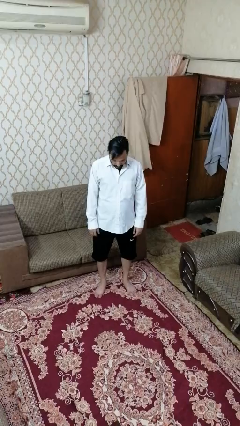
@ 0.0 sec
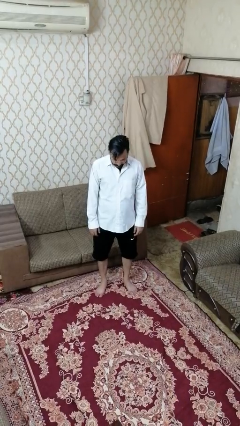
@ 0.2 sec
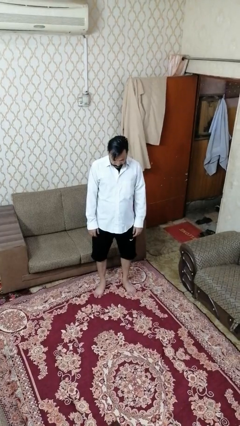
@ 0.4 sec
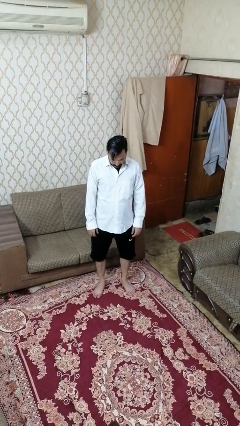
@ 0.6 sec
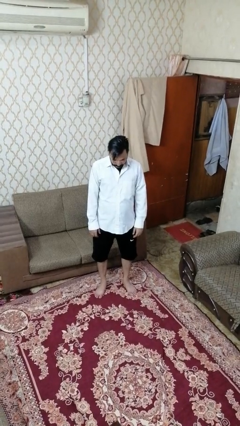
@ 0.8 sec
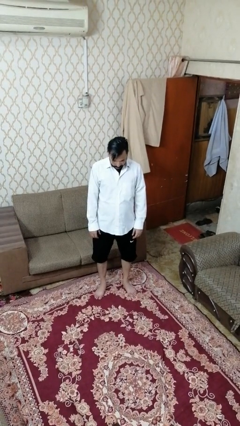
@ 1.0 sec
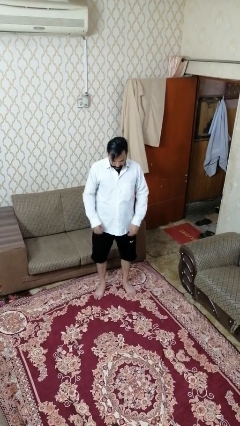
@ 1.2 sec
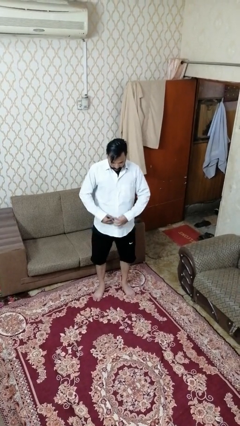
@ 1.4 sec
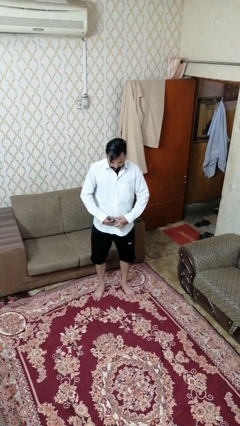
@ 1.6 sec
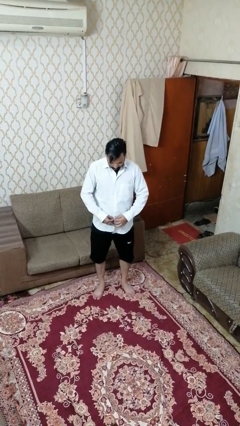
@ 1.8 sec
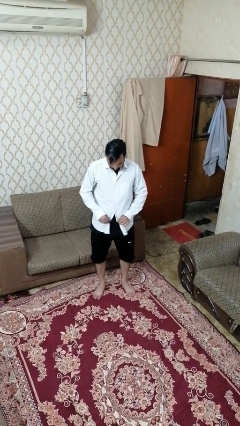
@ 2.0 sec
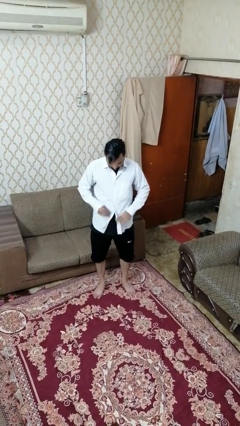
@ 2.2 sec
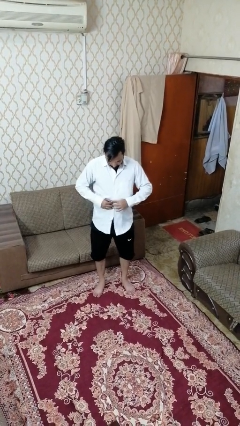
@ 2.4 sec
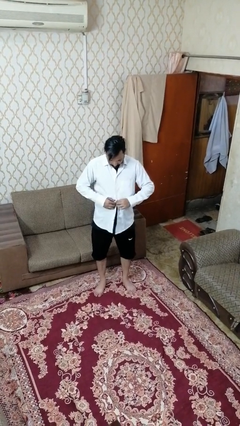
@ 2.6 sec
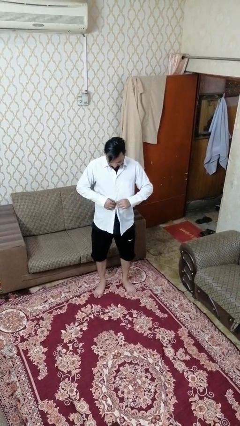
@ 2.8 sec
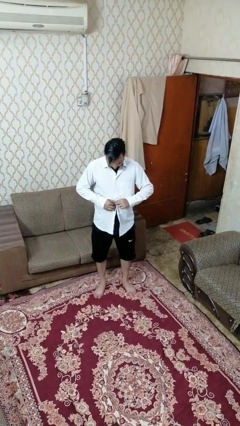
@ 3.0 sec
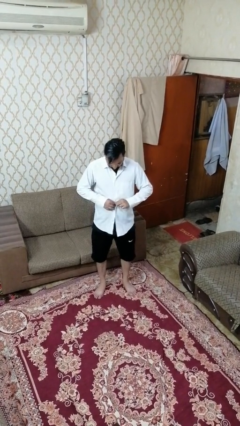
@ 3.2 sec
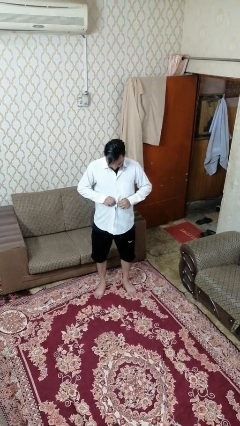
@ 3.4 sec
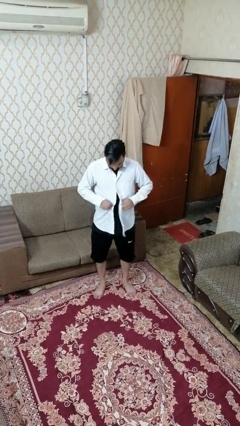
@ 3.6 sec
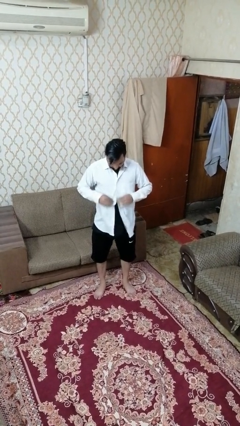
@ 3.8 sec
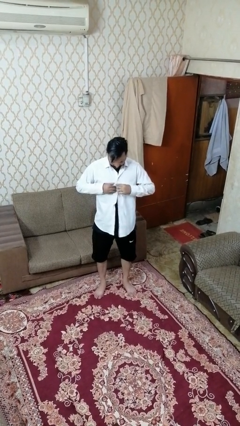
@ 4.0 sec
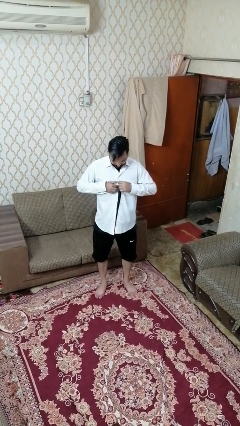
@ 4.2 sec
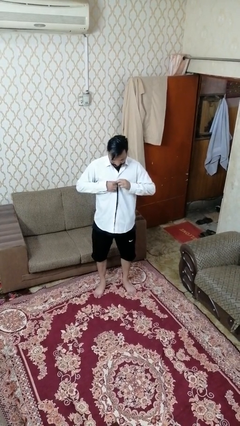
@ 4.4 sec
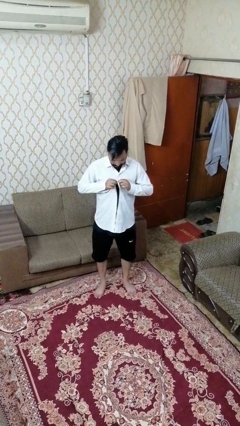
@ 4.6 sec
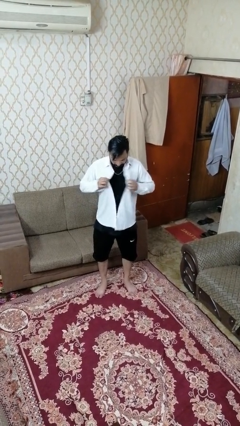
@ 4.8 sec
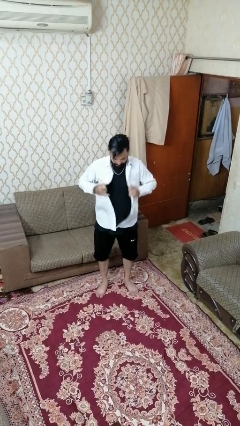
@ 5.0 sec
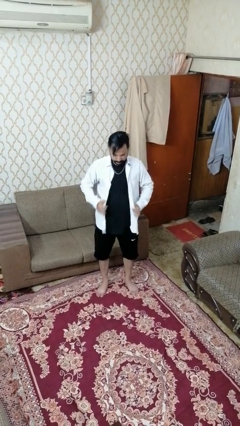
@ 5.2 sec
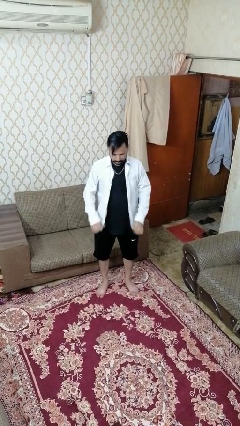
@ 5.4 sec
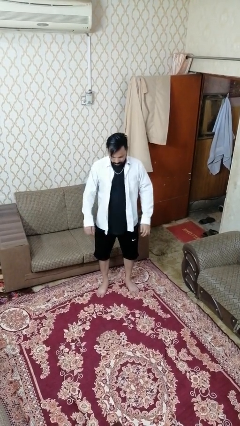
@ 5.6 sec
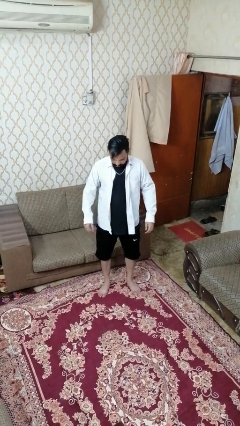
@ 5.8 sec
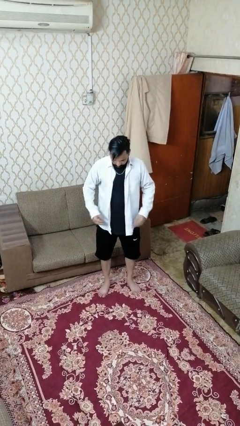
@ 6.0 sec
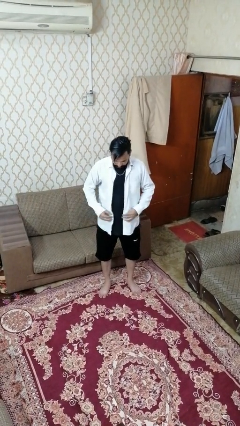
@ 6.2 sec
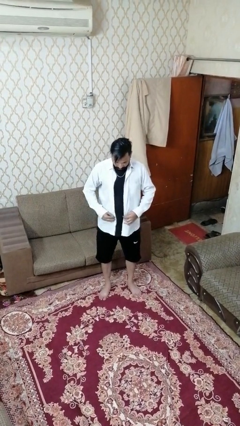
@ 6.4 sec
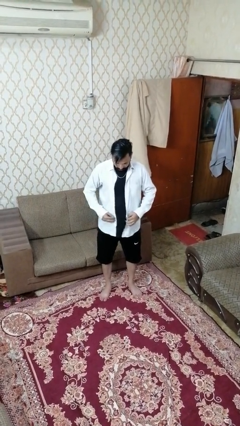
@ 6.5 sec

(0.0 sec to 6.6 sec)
person unbuttons shirt

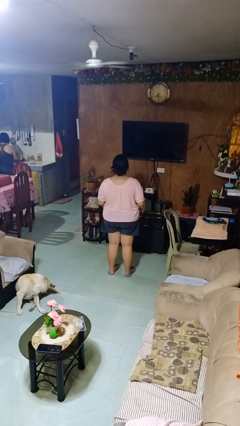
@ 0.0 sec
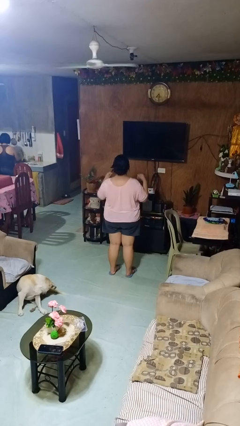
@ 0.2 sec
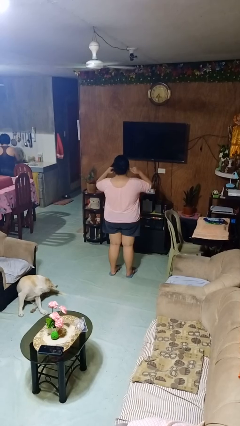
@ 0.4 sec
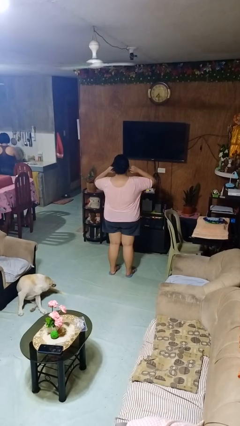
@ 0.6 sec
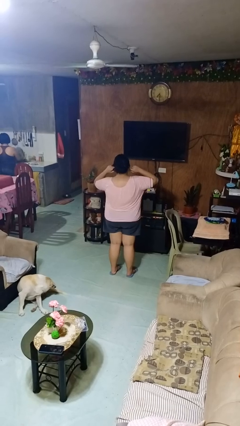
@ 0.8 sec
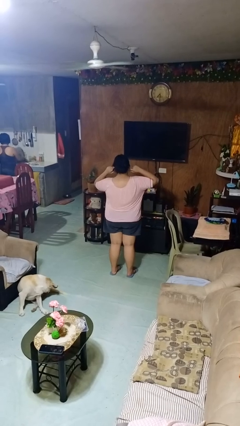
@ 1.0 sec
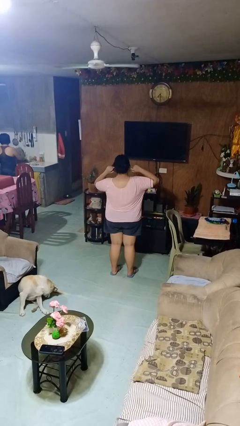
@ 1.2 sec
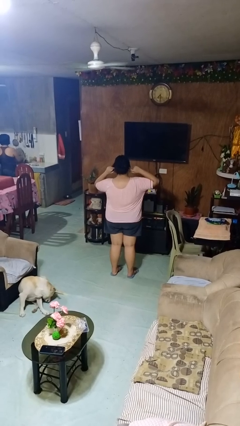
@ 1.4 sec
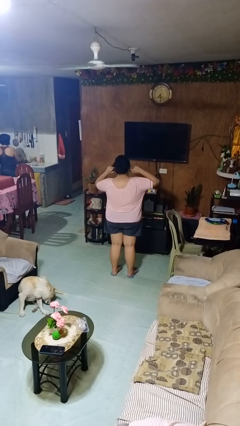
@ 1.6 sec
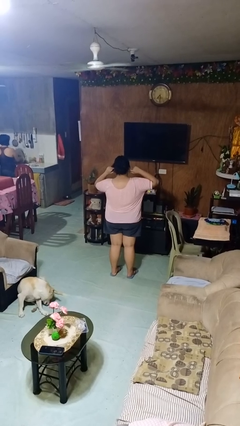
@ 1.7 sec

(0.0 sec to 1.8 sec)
person puts fingers in ear

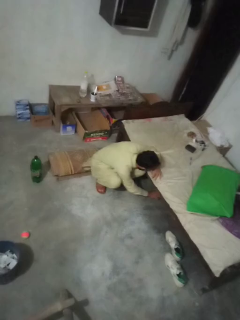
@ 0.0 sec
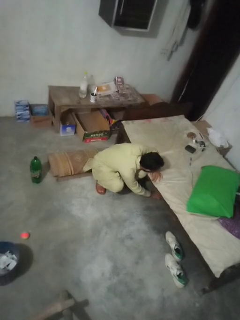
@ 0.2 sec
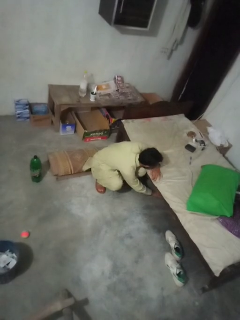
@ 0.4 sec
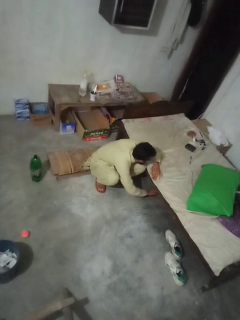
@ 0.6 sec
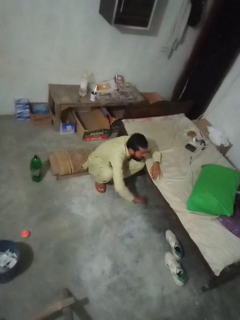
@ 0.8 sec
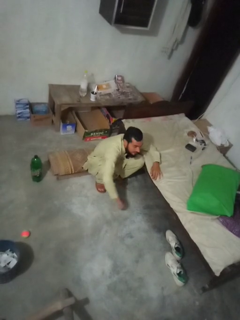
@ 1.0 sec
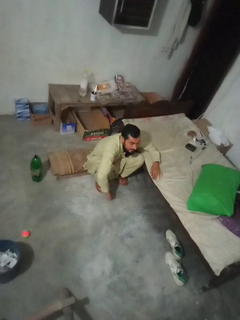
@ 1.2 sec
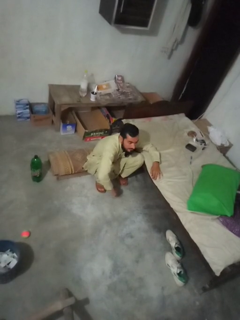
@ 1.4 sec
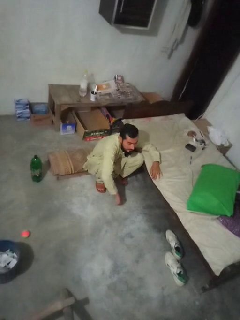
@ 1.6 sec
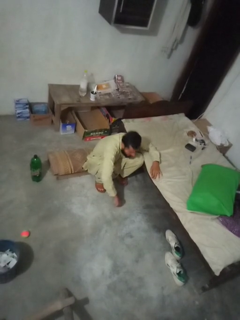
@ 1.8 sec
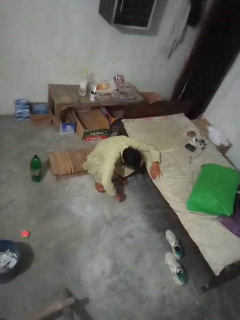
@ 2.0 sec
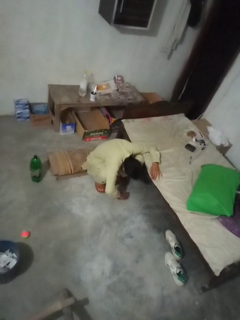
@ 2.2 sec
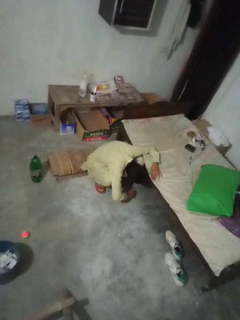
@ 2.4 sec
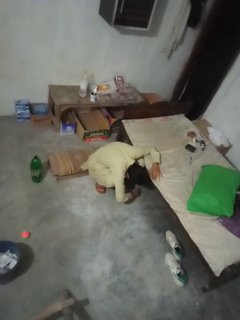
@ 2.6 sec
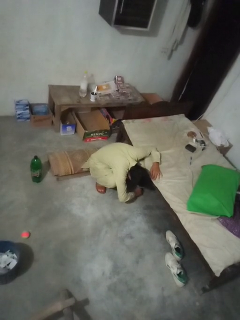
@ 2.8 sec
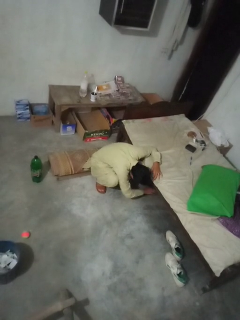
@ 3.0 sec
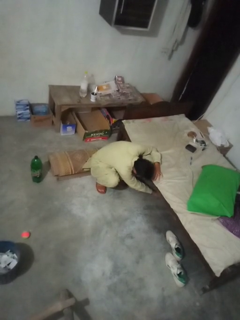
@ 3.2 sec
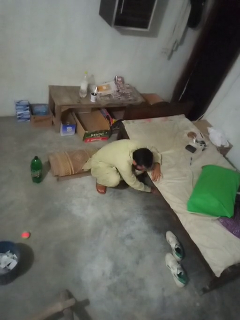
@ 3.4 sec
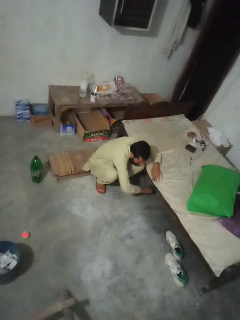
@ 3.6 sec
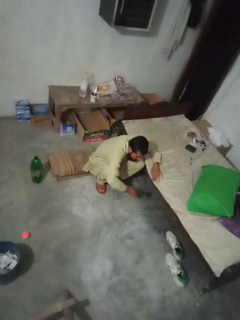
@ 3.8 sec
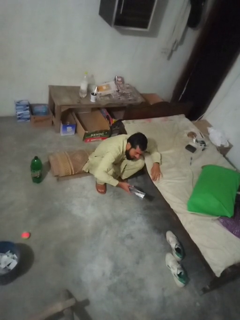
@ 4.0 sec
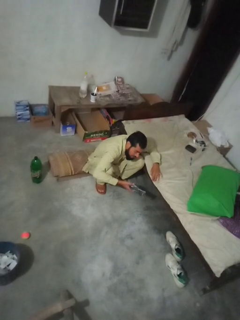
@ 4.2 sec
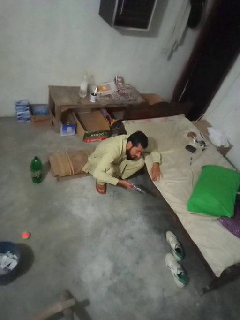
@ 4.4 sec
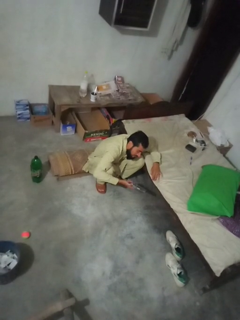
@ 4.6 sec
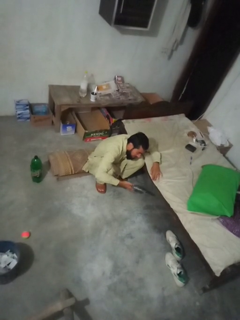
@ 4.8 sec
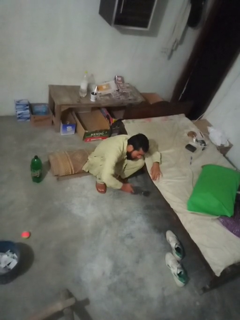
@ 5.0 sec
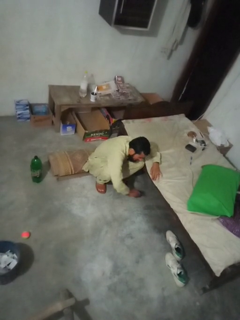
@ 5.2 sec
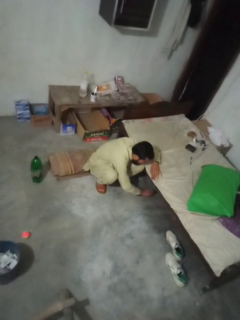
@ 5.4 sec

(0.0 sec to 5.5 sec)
person searches under couch

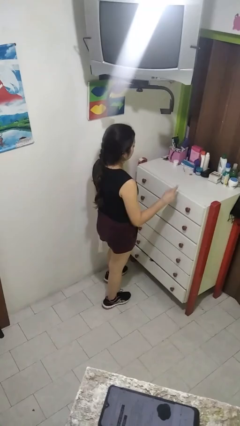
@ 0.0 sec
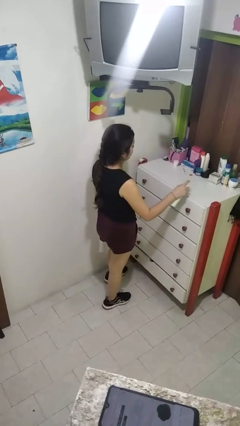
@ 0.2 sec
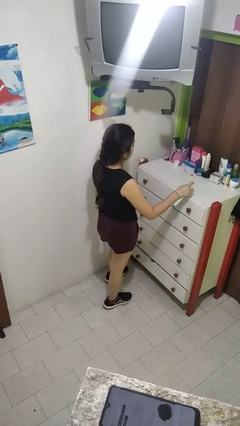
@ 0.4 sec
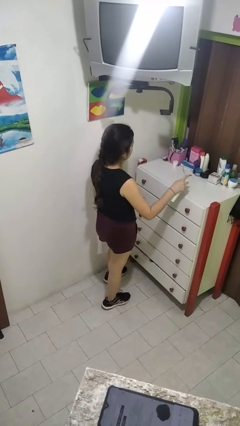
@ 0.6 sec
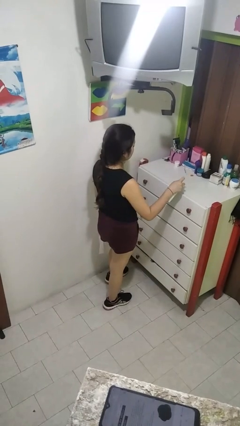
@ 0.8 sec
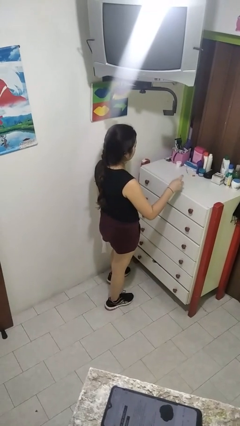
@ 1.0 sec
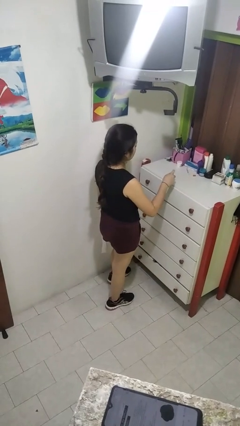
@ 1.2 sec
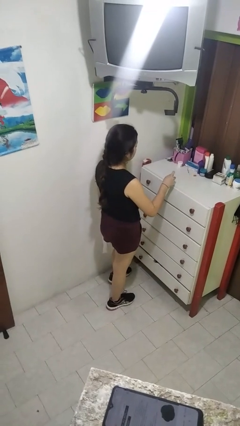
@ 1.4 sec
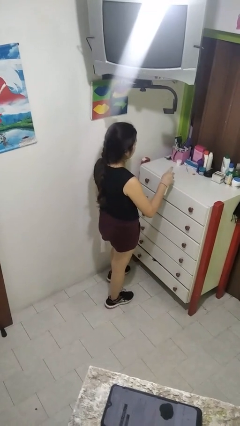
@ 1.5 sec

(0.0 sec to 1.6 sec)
person sprays from bottle

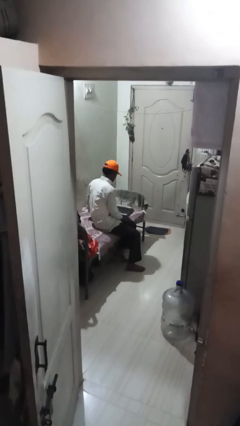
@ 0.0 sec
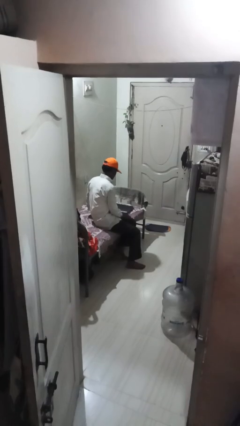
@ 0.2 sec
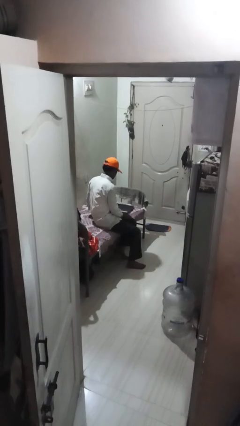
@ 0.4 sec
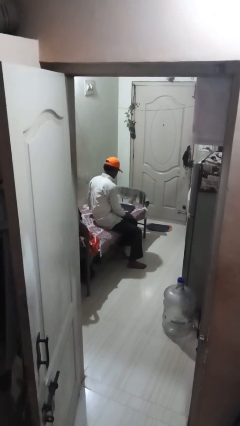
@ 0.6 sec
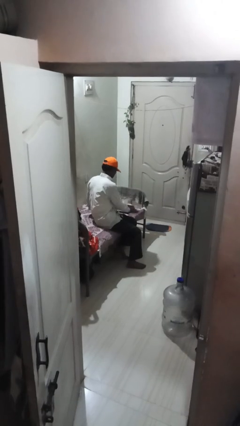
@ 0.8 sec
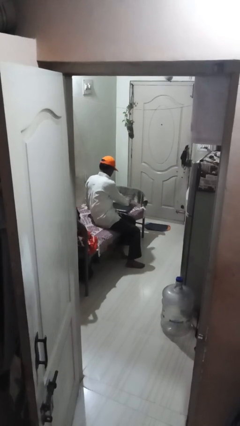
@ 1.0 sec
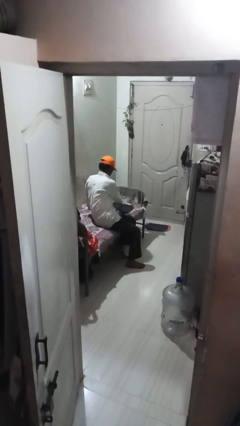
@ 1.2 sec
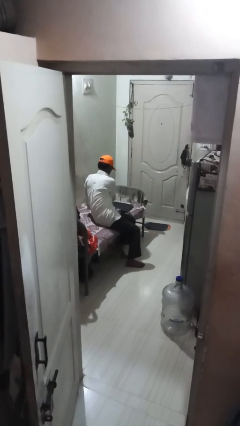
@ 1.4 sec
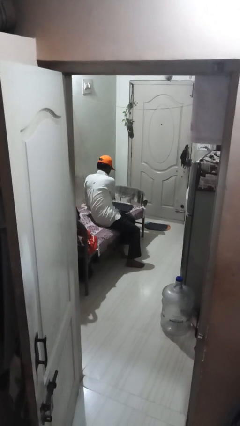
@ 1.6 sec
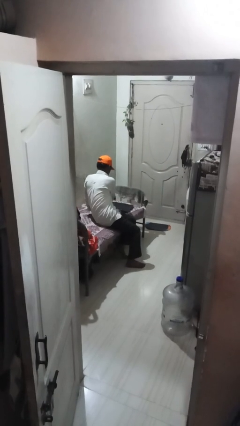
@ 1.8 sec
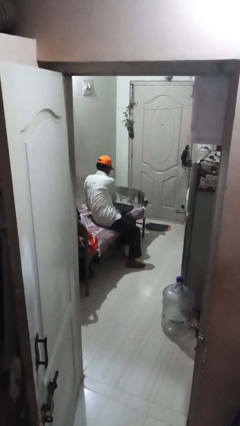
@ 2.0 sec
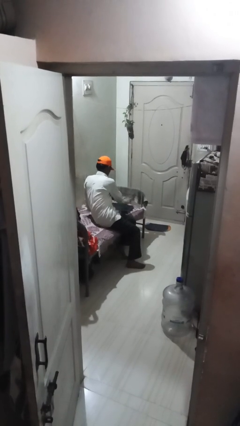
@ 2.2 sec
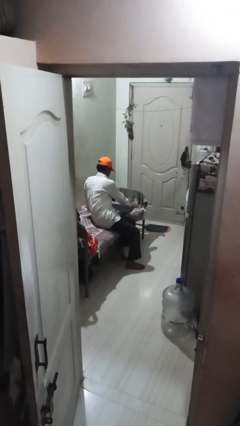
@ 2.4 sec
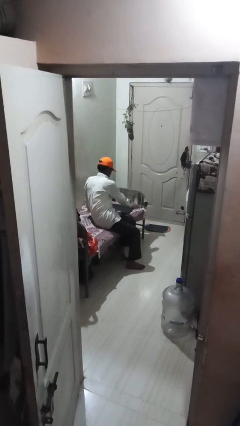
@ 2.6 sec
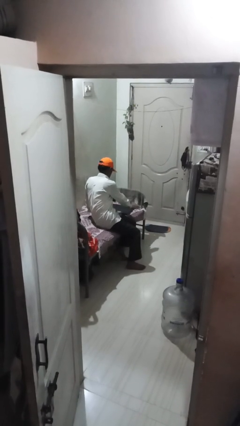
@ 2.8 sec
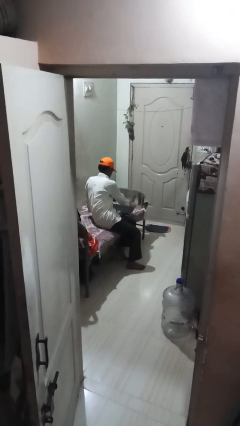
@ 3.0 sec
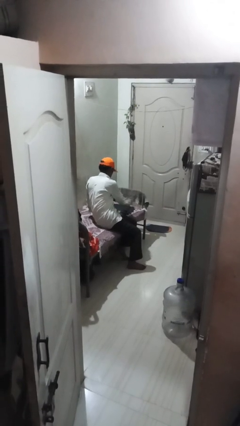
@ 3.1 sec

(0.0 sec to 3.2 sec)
person waves hand over object
